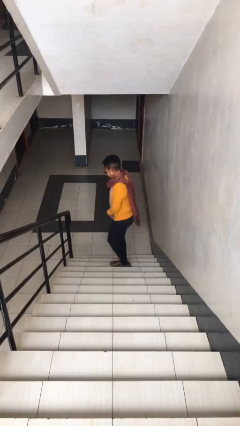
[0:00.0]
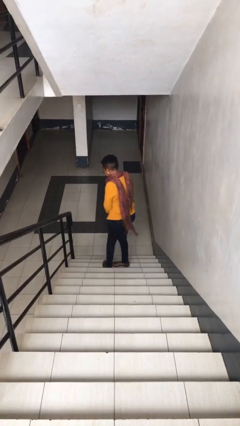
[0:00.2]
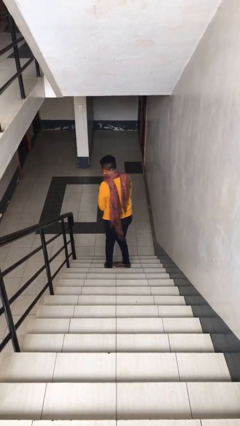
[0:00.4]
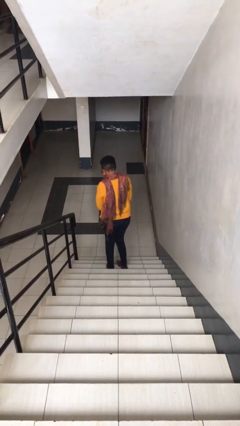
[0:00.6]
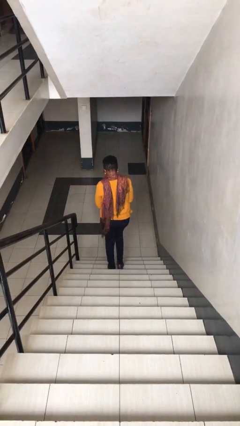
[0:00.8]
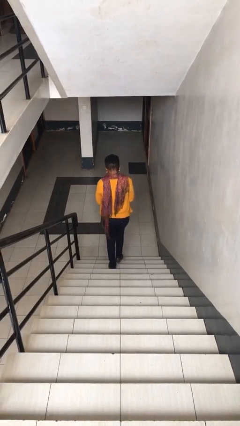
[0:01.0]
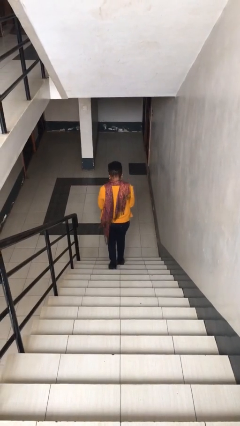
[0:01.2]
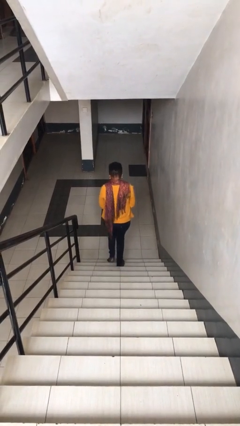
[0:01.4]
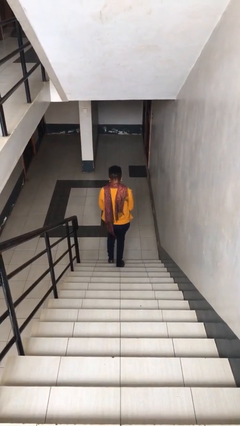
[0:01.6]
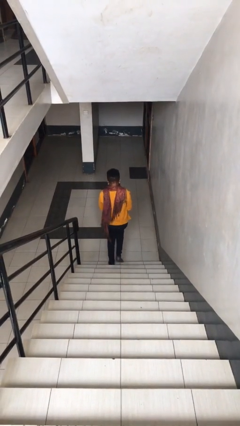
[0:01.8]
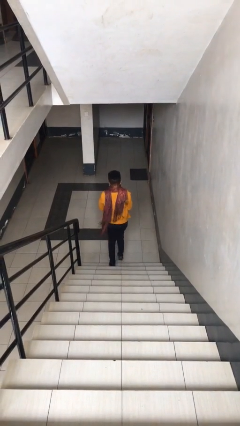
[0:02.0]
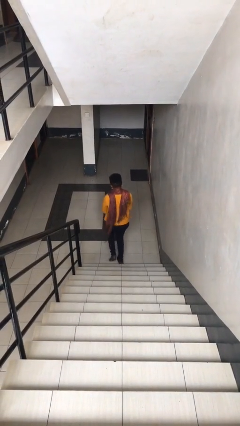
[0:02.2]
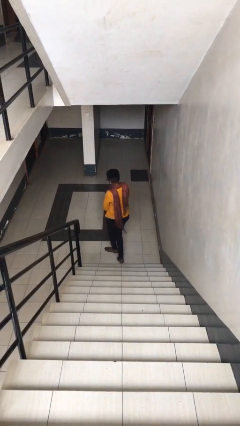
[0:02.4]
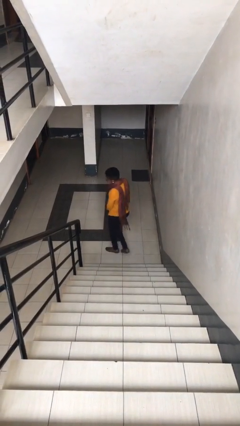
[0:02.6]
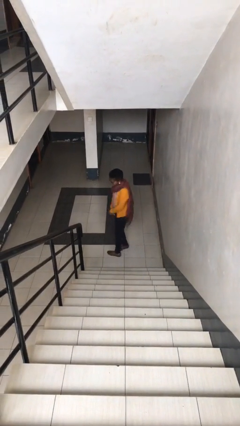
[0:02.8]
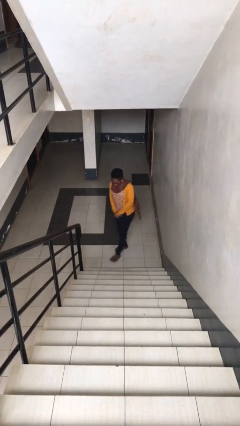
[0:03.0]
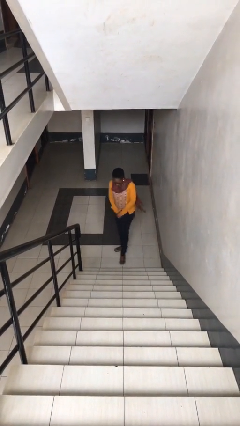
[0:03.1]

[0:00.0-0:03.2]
person climbs down stairs

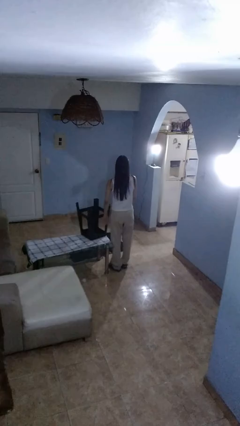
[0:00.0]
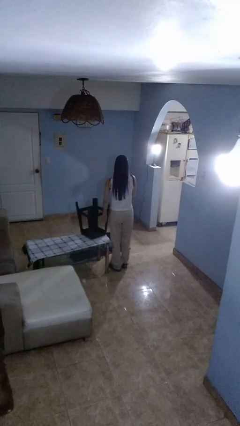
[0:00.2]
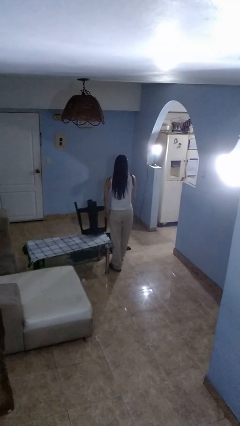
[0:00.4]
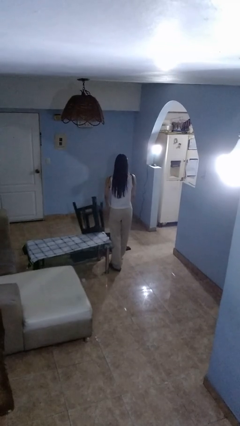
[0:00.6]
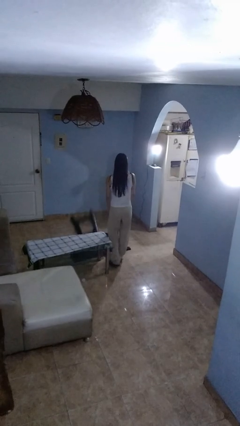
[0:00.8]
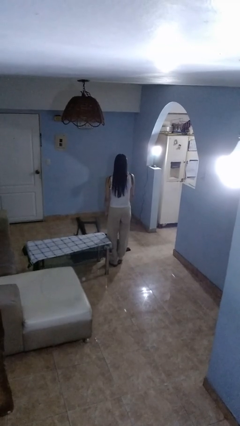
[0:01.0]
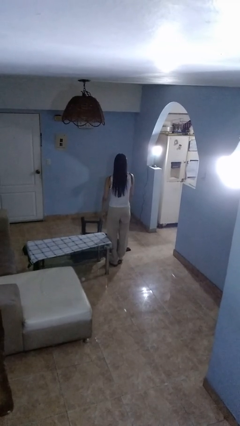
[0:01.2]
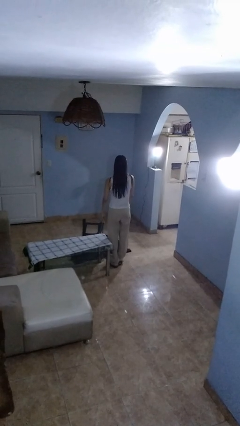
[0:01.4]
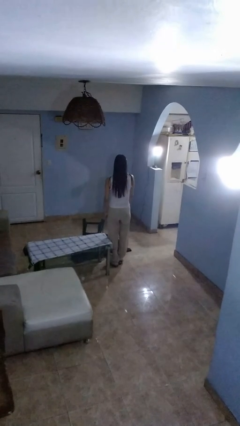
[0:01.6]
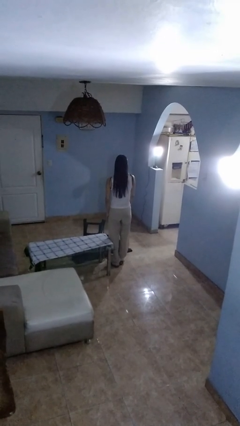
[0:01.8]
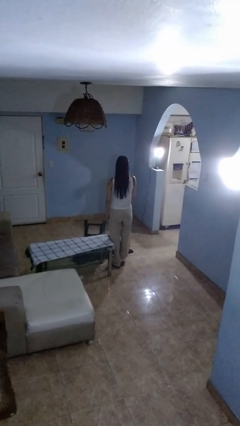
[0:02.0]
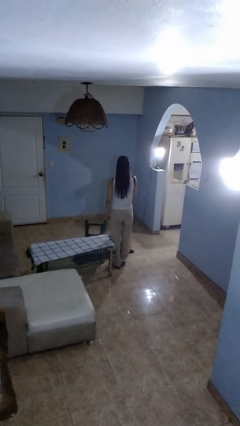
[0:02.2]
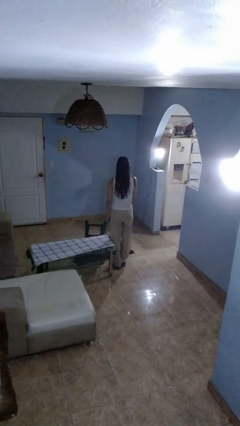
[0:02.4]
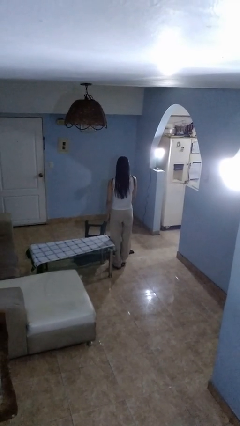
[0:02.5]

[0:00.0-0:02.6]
person knocks over furniture

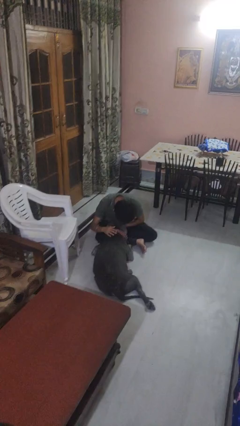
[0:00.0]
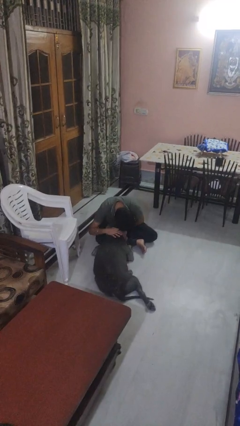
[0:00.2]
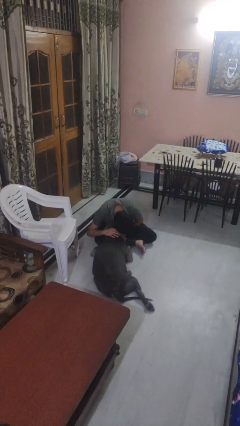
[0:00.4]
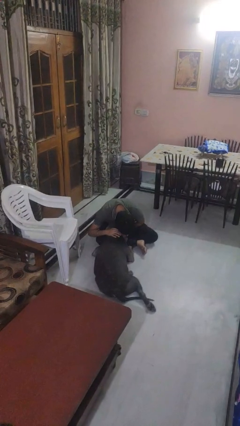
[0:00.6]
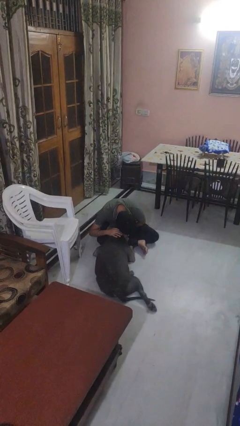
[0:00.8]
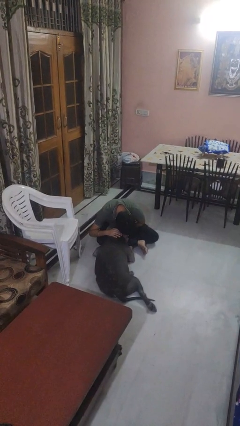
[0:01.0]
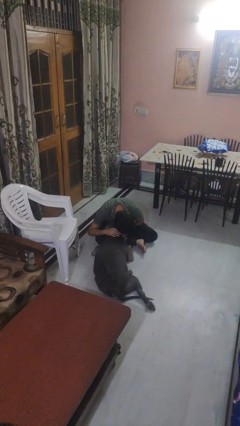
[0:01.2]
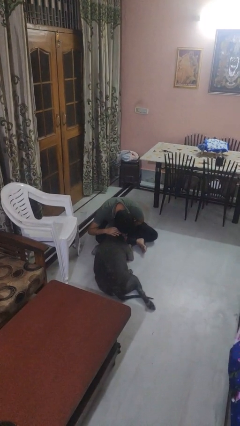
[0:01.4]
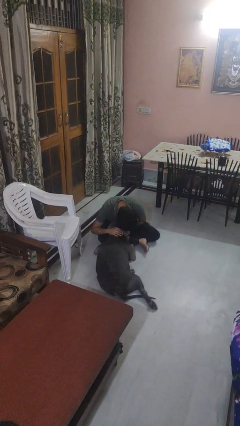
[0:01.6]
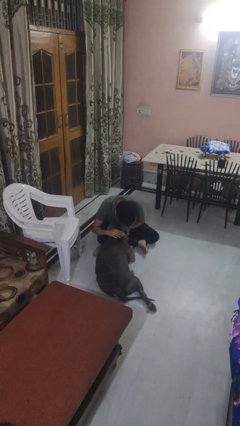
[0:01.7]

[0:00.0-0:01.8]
person hugs dog

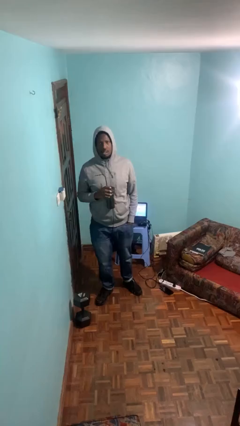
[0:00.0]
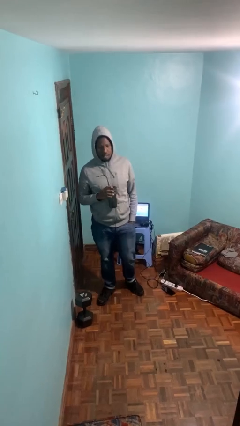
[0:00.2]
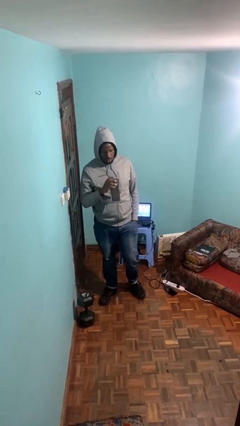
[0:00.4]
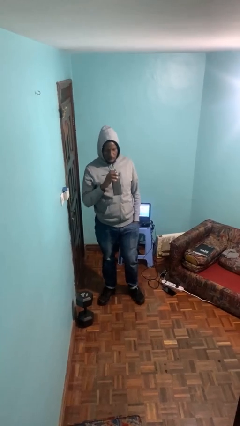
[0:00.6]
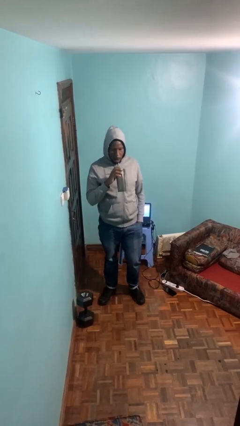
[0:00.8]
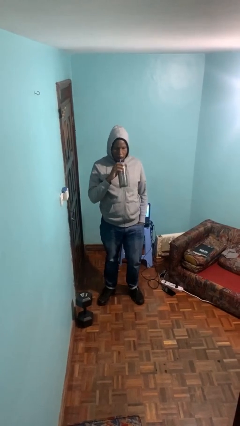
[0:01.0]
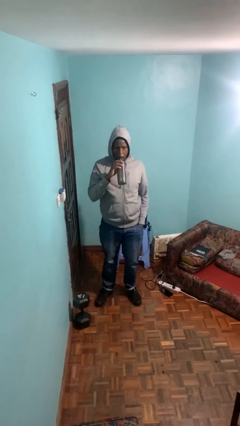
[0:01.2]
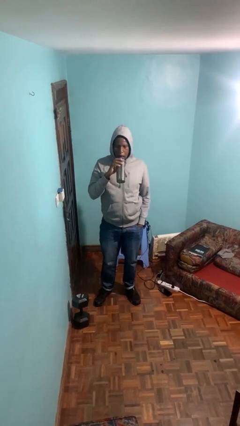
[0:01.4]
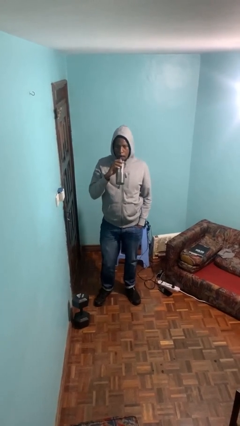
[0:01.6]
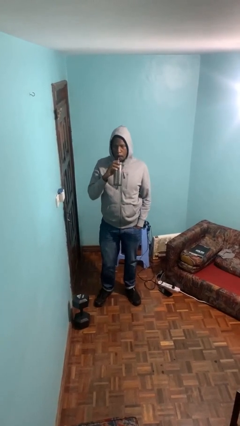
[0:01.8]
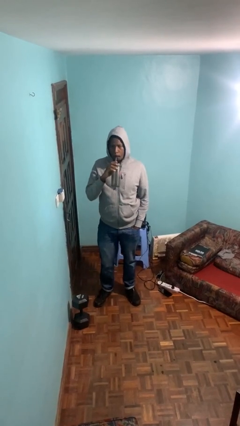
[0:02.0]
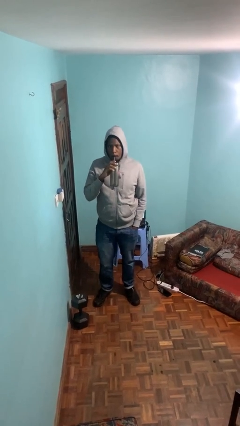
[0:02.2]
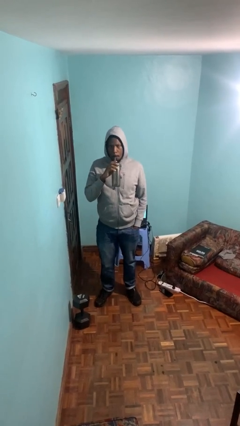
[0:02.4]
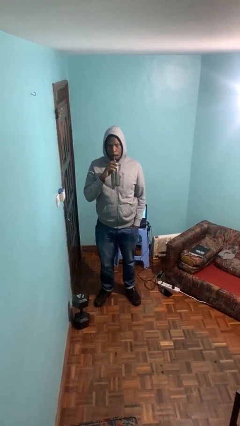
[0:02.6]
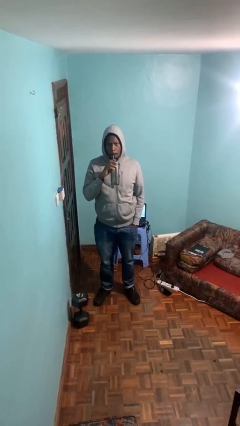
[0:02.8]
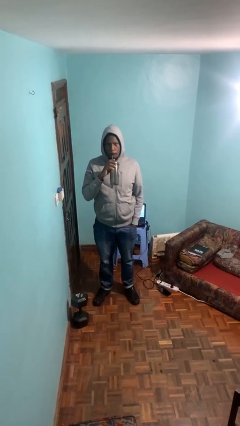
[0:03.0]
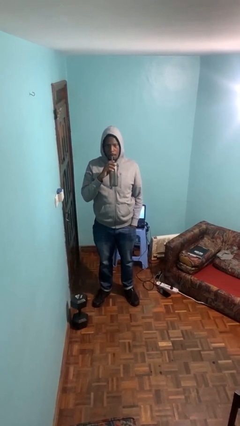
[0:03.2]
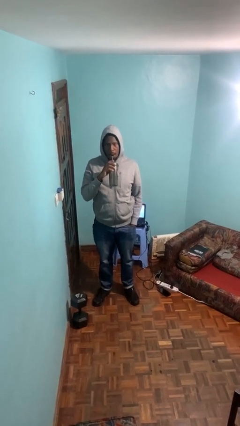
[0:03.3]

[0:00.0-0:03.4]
person drinks from straw

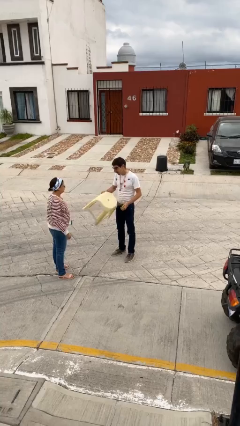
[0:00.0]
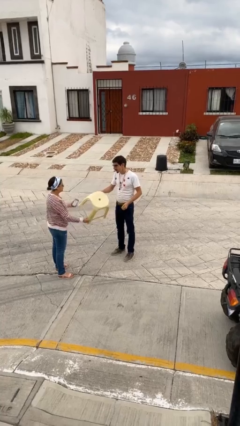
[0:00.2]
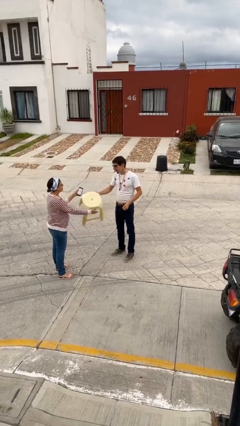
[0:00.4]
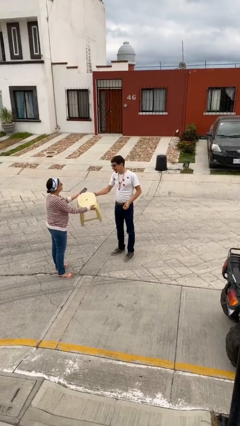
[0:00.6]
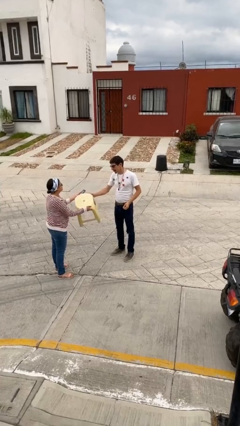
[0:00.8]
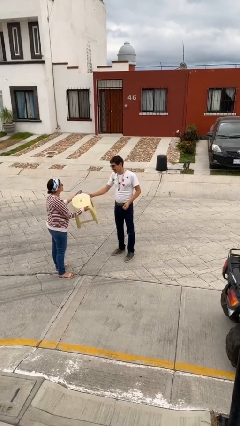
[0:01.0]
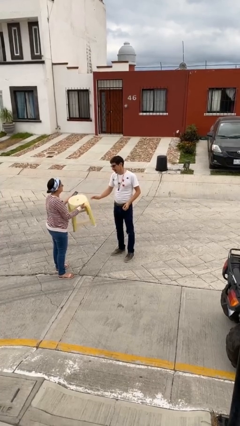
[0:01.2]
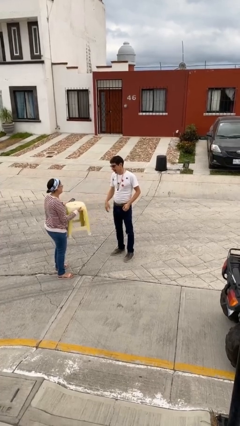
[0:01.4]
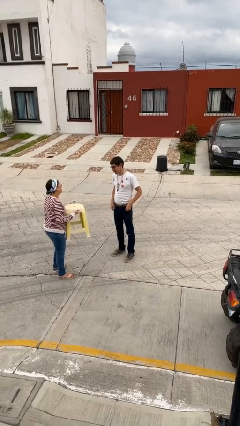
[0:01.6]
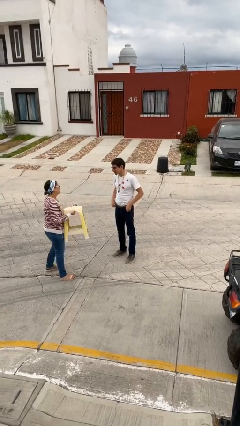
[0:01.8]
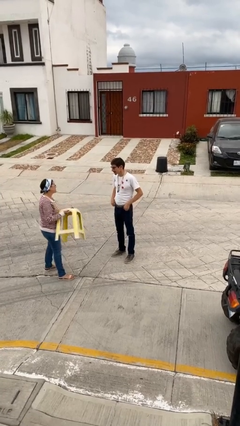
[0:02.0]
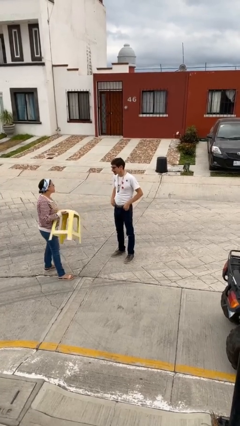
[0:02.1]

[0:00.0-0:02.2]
person transfers object to person

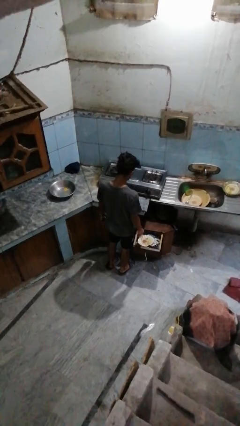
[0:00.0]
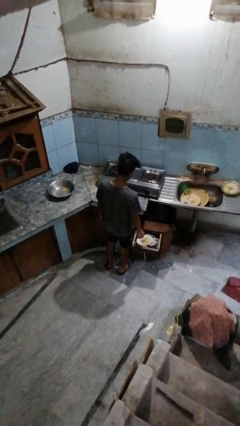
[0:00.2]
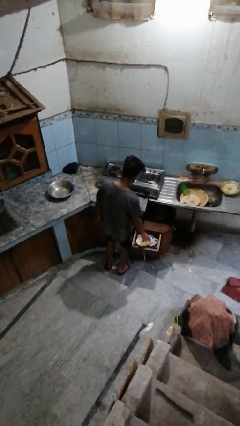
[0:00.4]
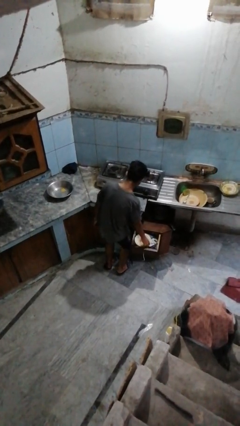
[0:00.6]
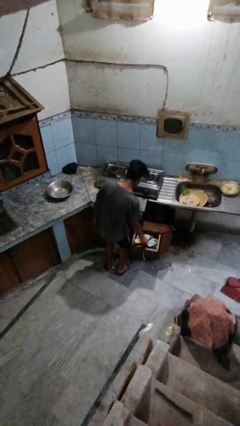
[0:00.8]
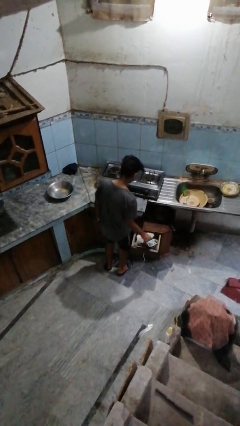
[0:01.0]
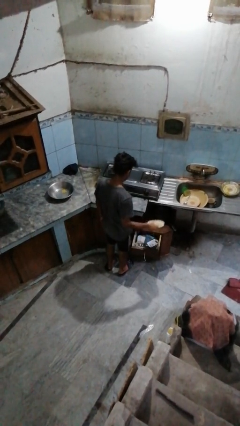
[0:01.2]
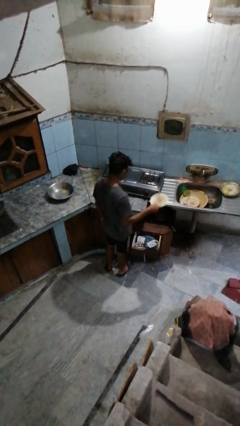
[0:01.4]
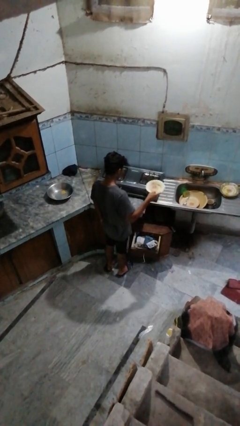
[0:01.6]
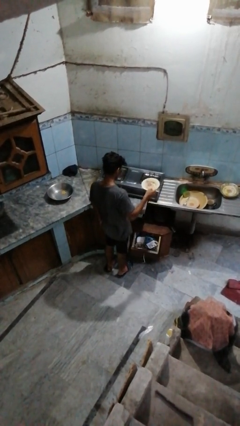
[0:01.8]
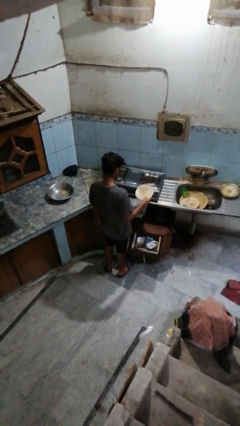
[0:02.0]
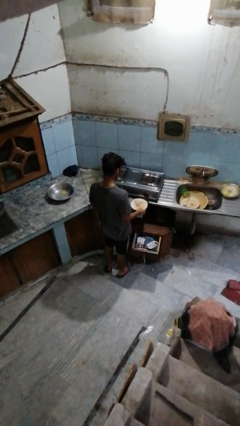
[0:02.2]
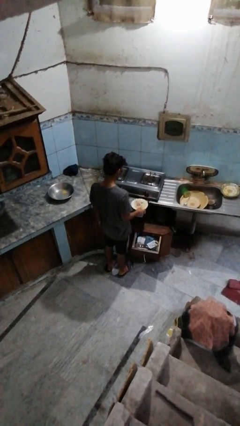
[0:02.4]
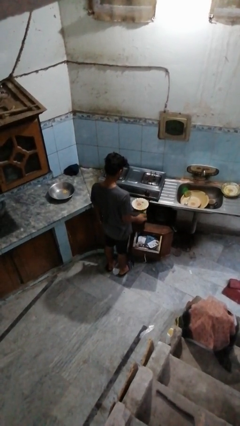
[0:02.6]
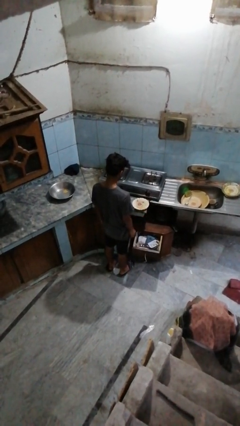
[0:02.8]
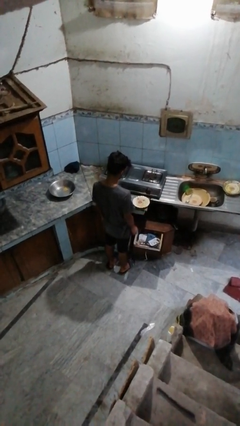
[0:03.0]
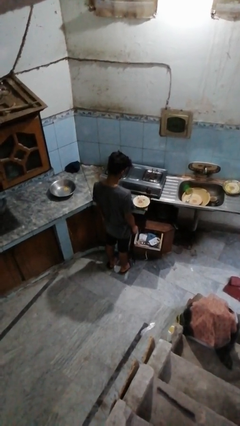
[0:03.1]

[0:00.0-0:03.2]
person takes object from kitchen drawer

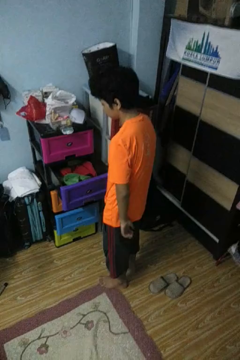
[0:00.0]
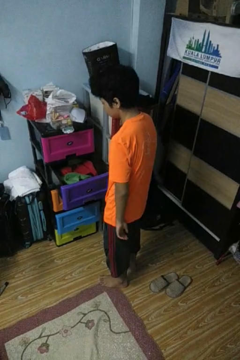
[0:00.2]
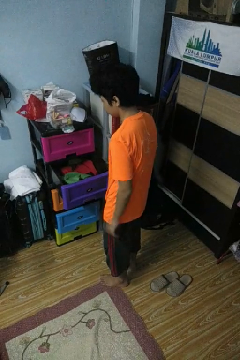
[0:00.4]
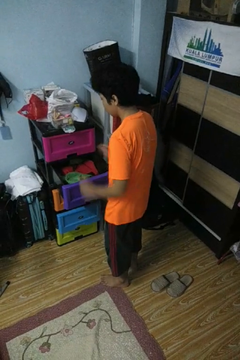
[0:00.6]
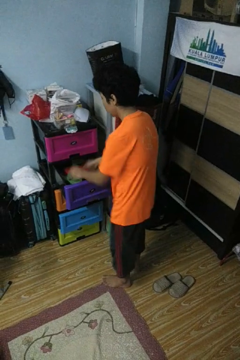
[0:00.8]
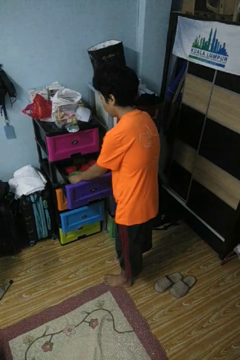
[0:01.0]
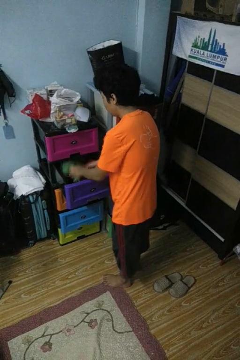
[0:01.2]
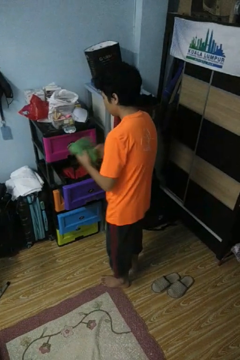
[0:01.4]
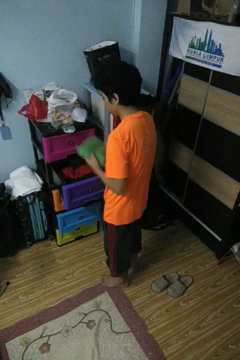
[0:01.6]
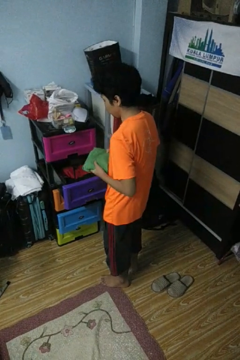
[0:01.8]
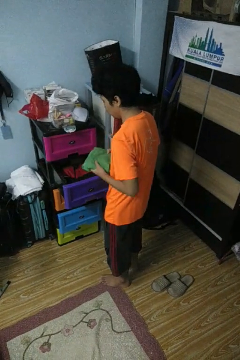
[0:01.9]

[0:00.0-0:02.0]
person takes clothes from dresser
